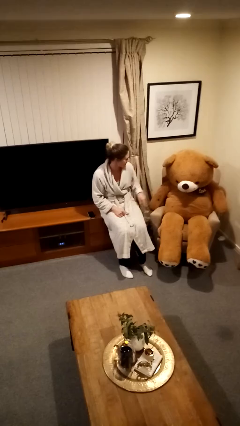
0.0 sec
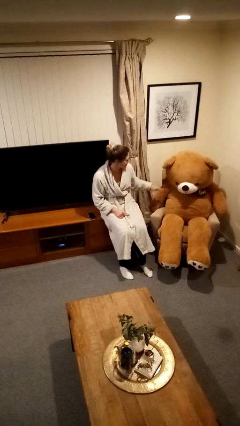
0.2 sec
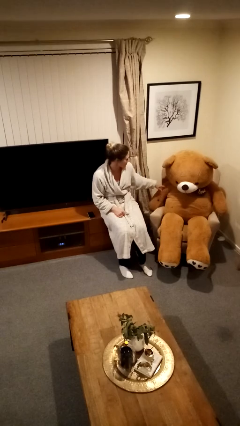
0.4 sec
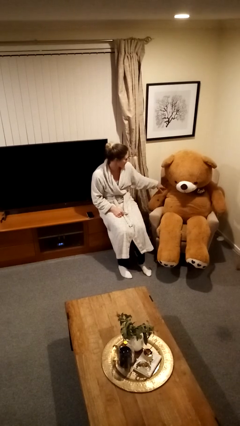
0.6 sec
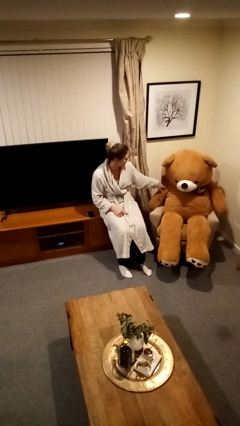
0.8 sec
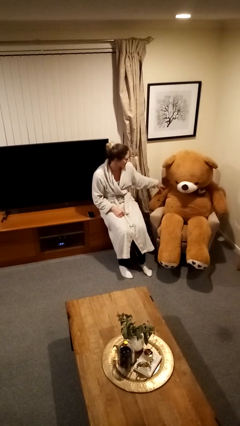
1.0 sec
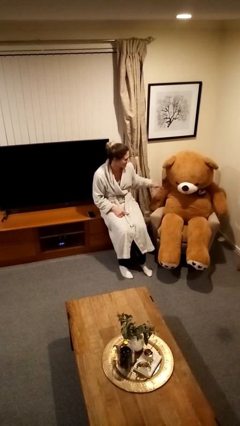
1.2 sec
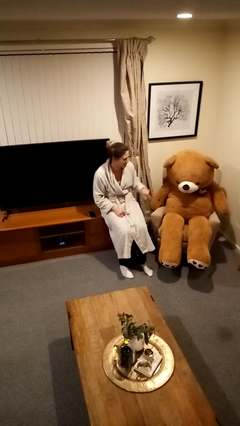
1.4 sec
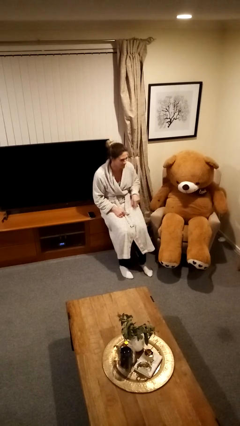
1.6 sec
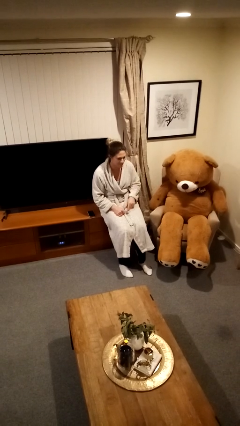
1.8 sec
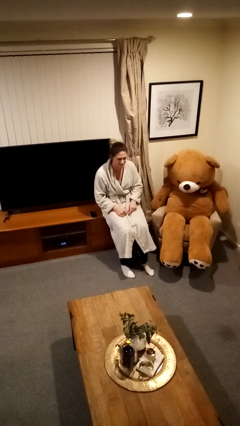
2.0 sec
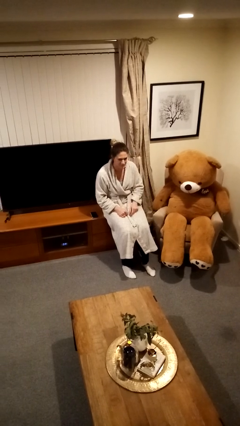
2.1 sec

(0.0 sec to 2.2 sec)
person taps object with finger

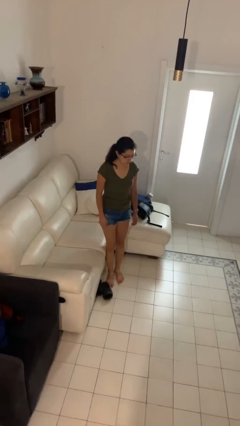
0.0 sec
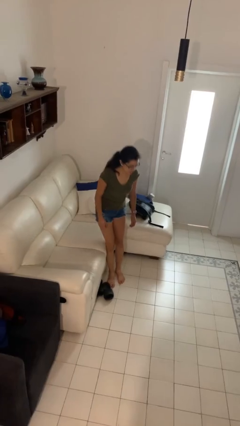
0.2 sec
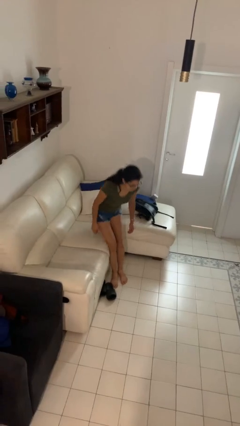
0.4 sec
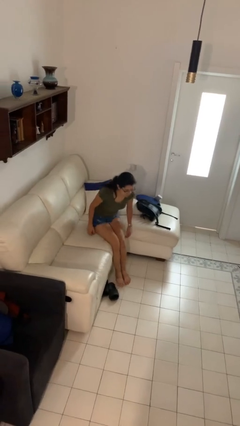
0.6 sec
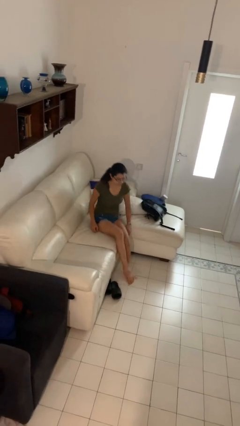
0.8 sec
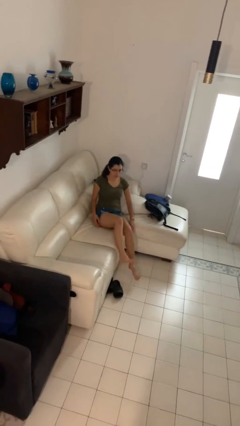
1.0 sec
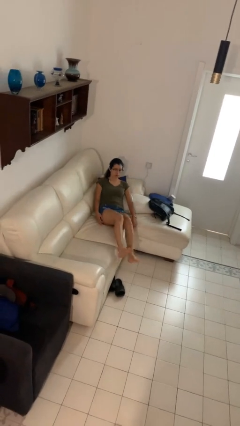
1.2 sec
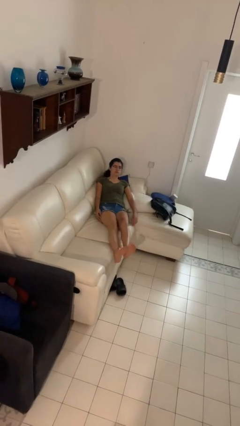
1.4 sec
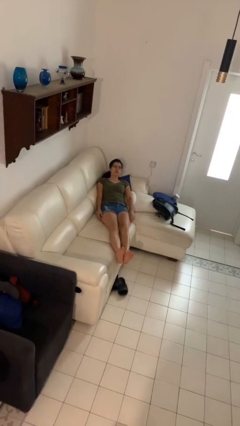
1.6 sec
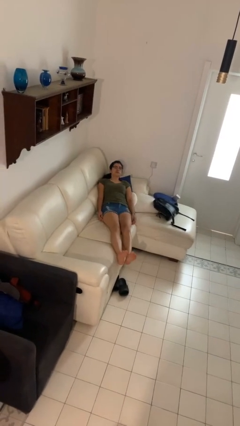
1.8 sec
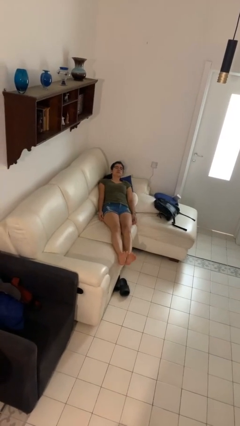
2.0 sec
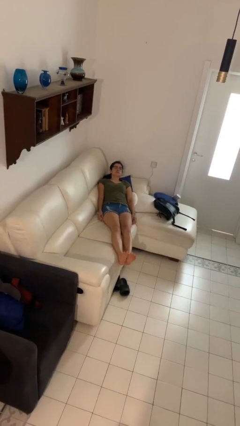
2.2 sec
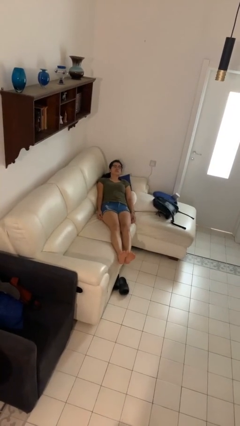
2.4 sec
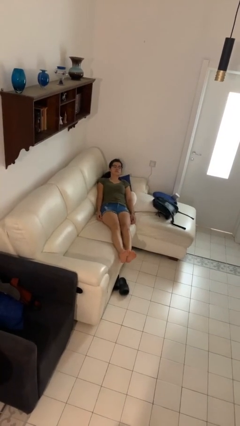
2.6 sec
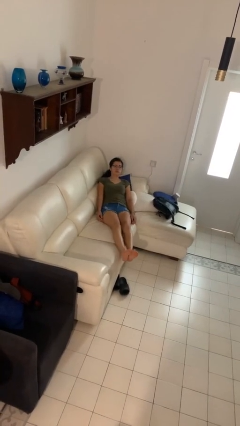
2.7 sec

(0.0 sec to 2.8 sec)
person lies down on couch

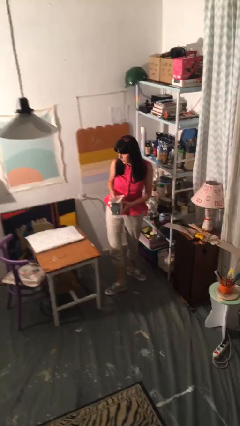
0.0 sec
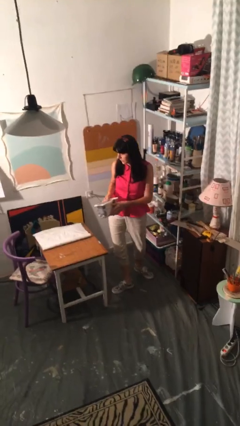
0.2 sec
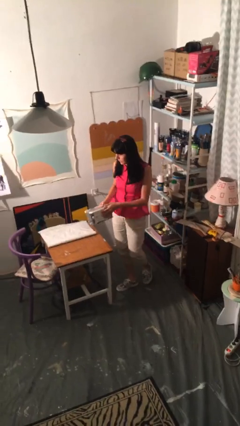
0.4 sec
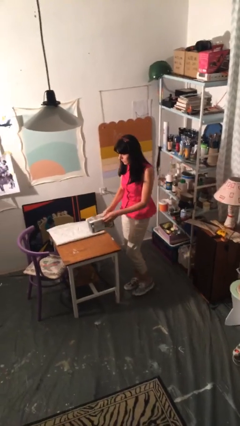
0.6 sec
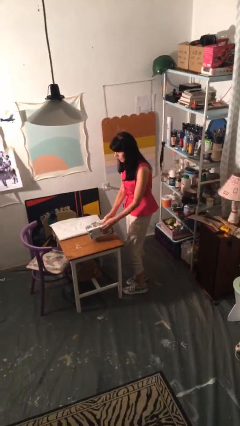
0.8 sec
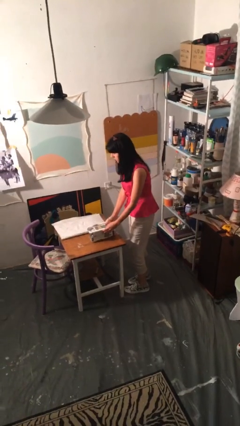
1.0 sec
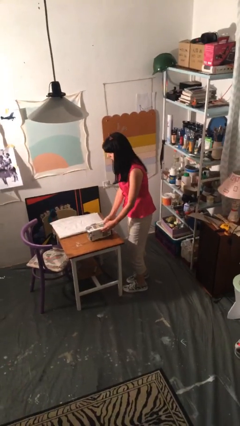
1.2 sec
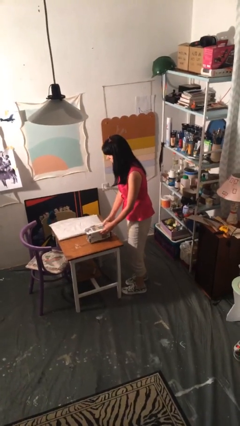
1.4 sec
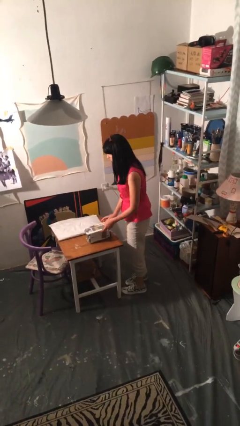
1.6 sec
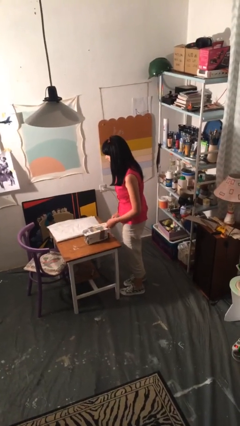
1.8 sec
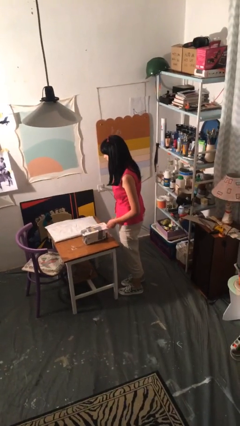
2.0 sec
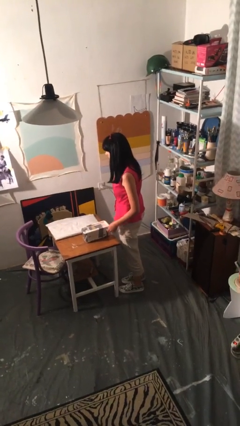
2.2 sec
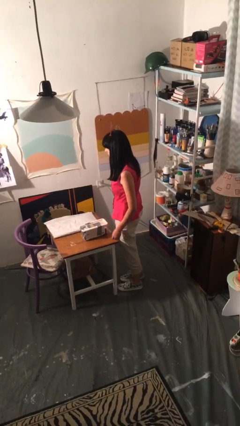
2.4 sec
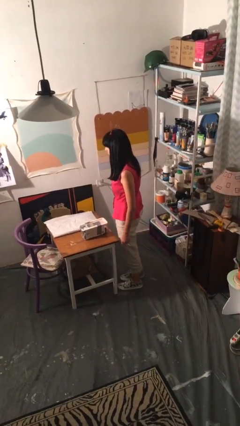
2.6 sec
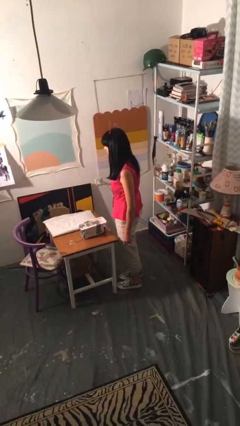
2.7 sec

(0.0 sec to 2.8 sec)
person puts down object on table

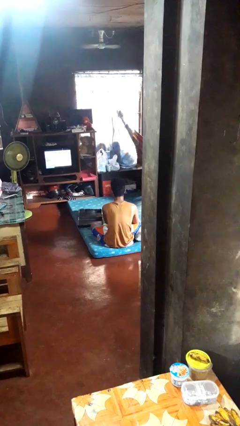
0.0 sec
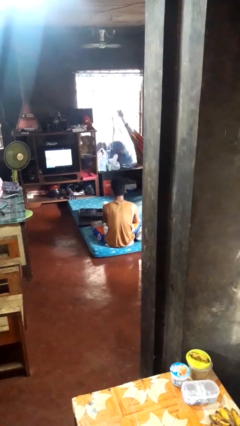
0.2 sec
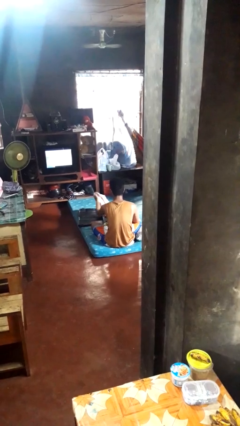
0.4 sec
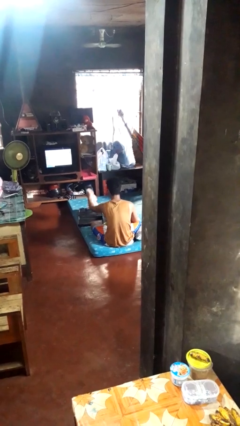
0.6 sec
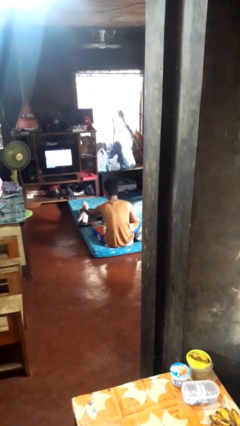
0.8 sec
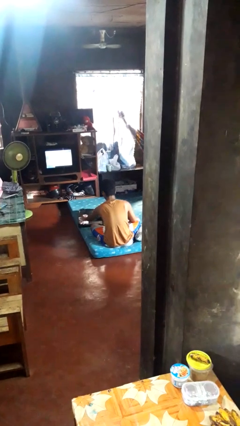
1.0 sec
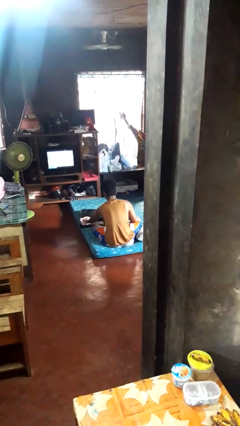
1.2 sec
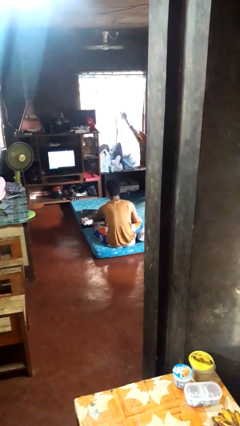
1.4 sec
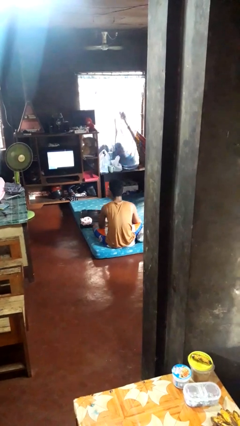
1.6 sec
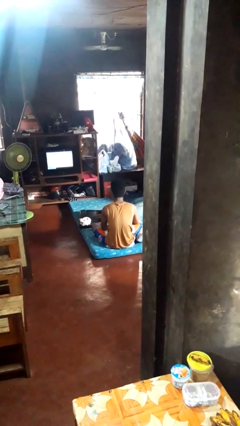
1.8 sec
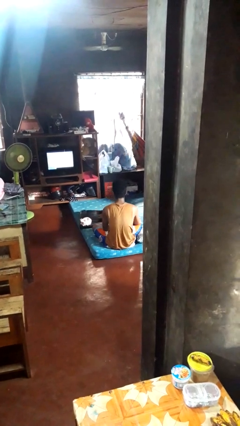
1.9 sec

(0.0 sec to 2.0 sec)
person loads clothes into suitcase

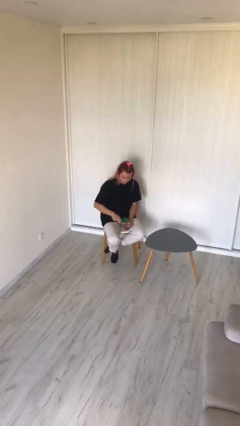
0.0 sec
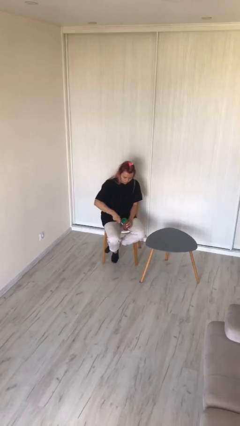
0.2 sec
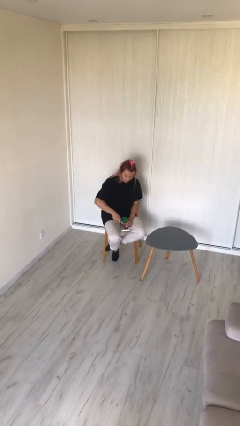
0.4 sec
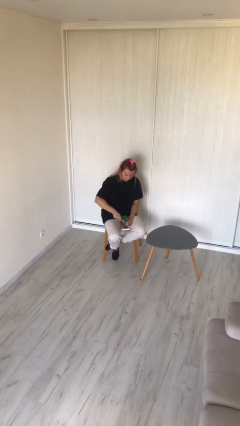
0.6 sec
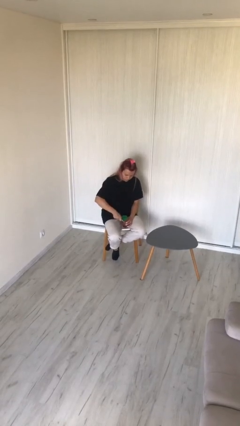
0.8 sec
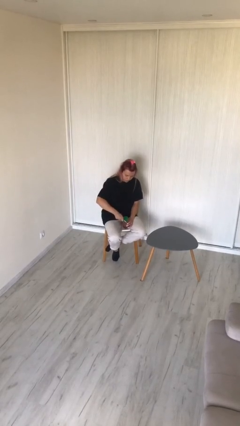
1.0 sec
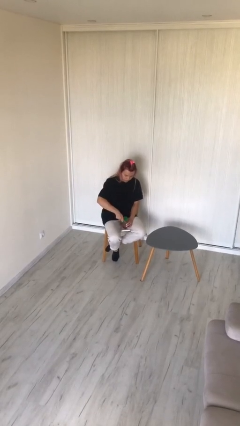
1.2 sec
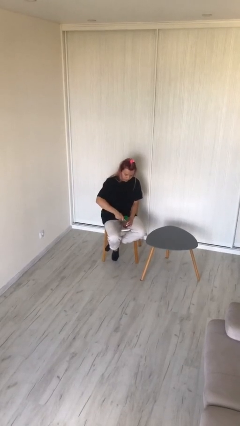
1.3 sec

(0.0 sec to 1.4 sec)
person opens can with can opener

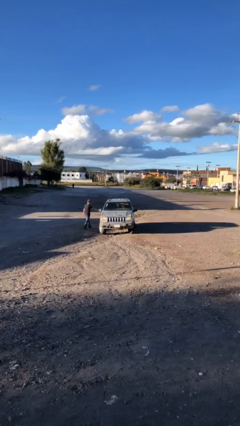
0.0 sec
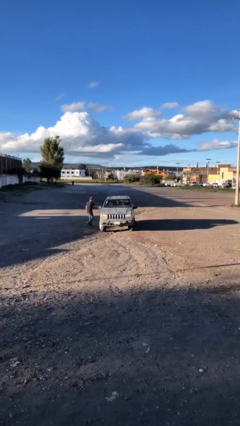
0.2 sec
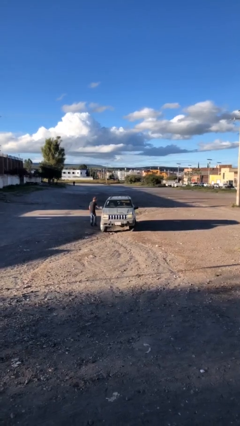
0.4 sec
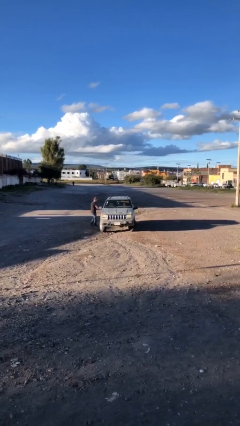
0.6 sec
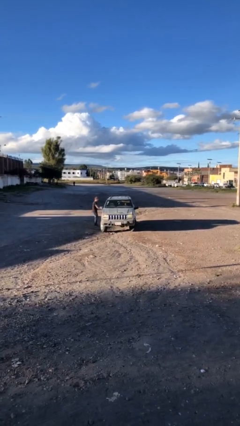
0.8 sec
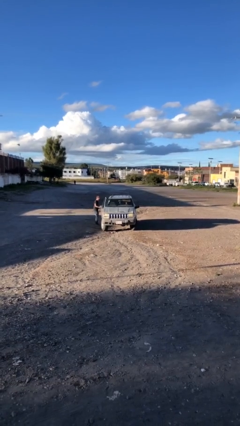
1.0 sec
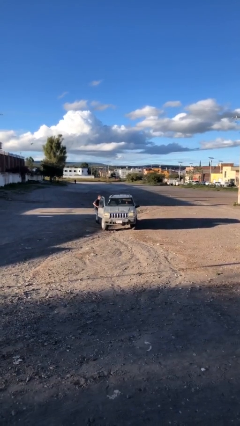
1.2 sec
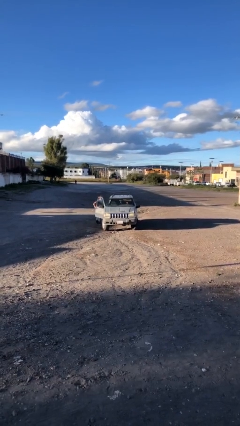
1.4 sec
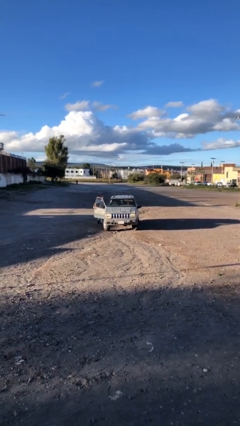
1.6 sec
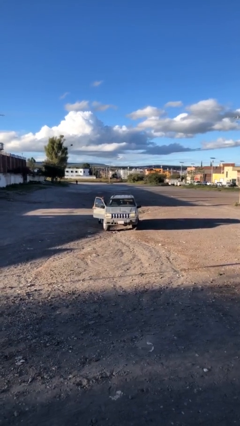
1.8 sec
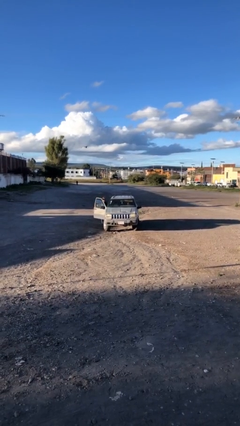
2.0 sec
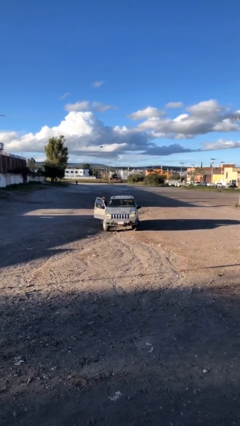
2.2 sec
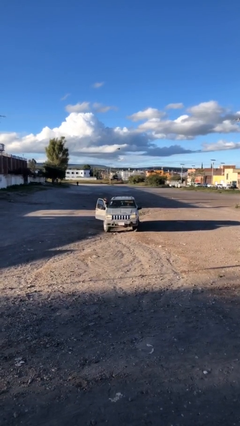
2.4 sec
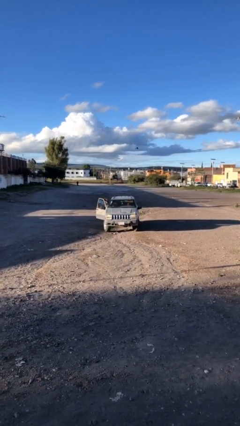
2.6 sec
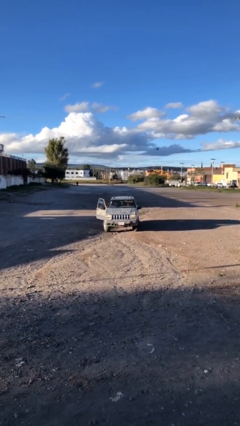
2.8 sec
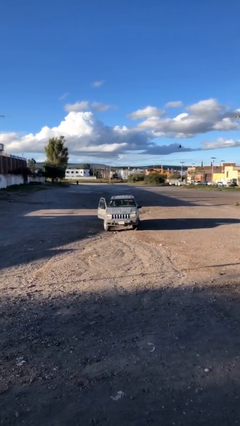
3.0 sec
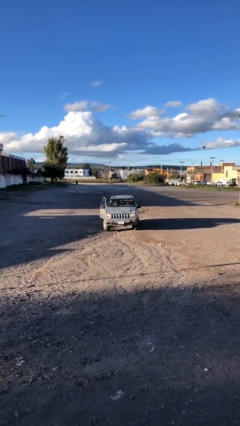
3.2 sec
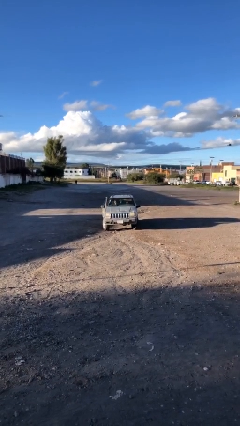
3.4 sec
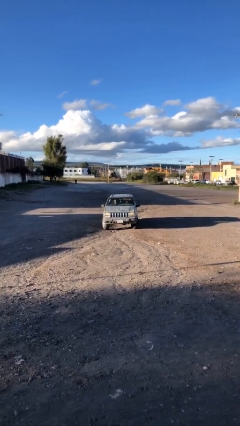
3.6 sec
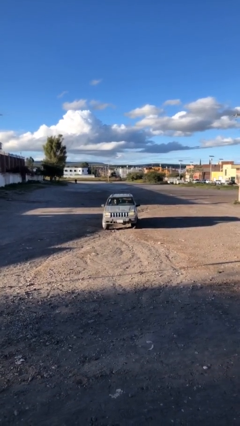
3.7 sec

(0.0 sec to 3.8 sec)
car picks up person

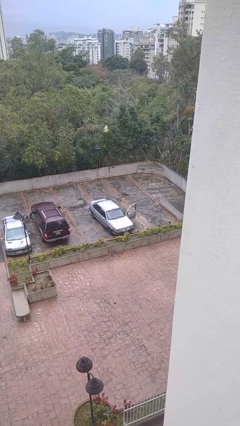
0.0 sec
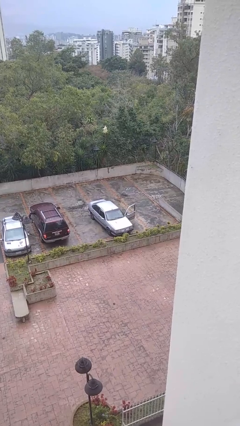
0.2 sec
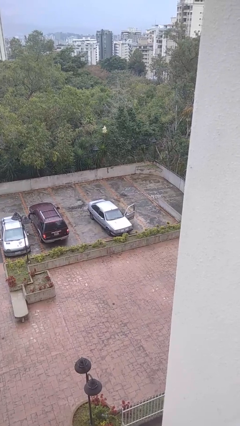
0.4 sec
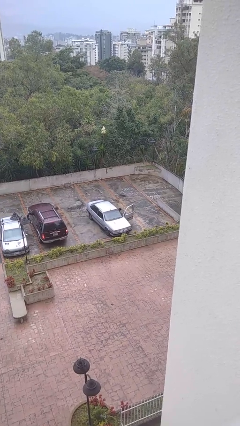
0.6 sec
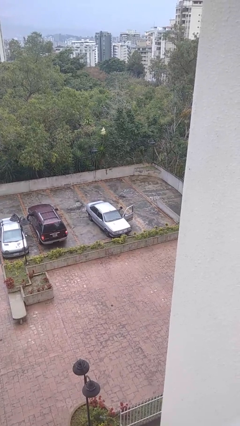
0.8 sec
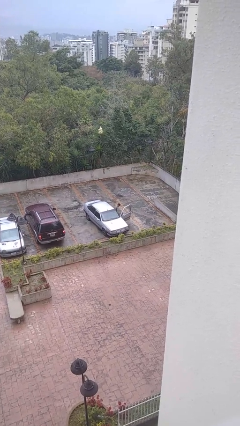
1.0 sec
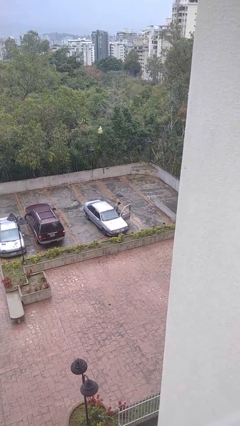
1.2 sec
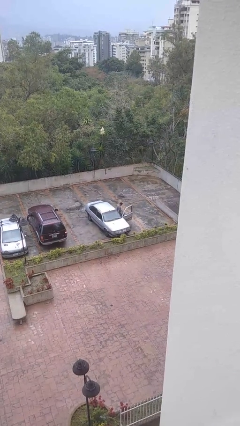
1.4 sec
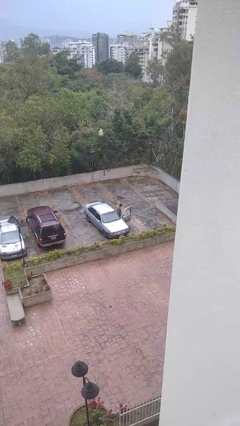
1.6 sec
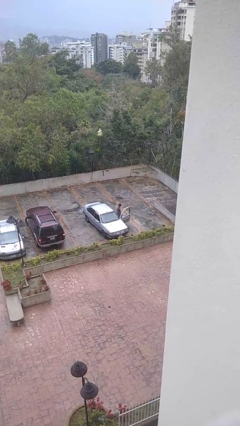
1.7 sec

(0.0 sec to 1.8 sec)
person exits car

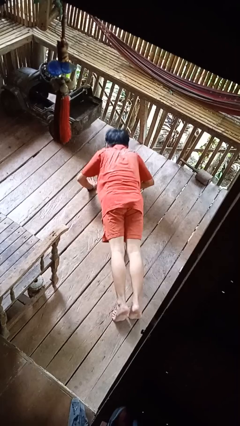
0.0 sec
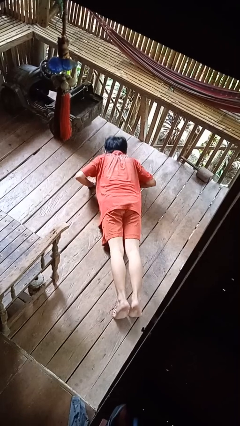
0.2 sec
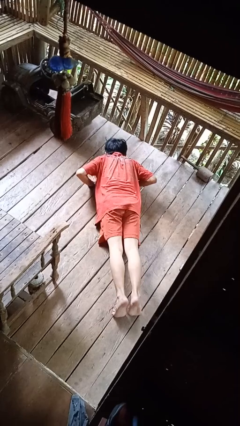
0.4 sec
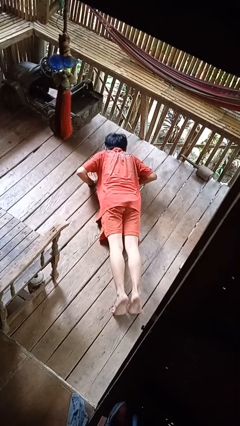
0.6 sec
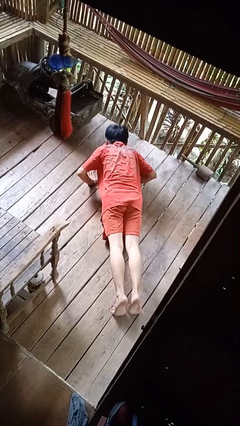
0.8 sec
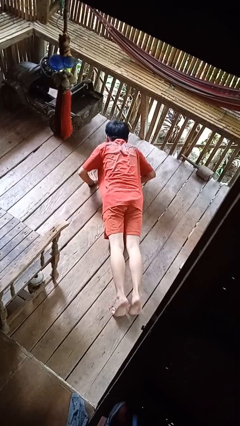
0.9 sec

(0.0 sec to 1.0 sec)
person exercises with pushup
